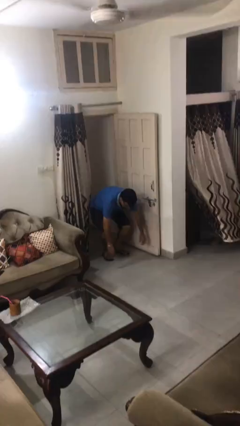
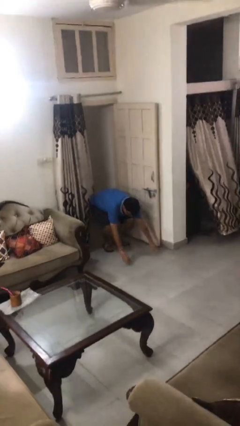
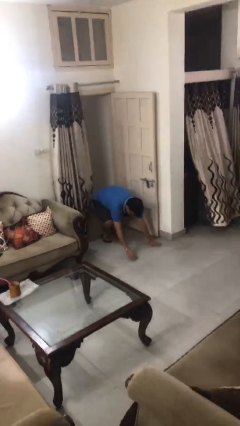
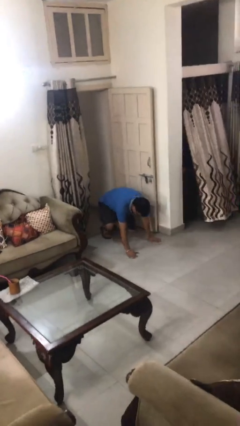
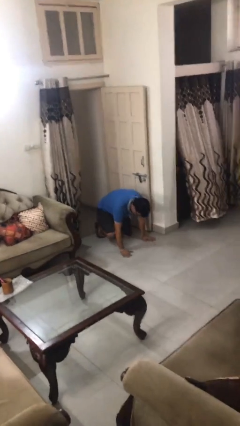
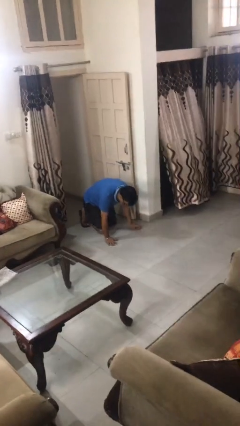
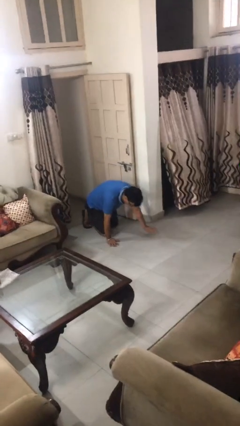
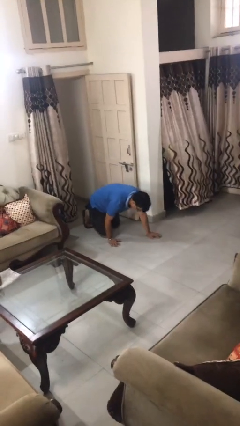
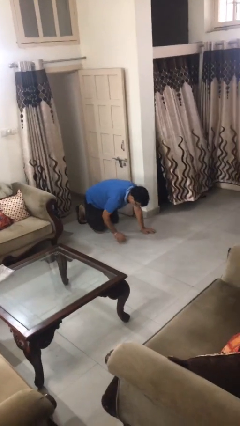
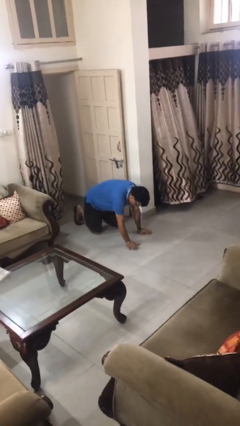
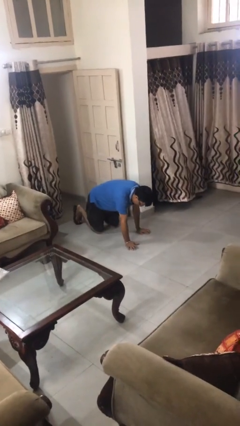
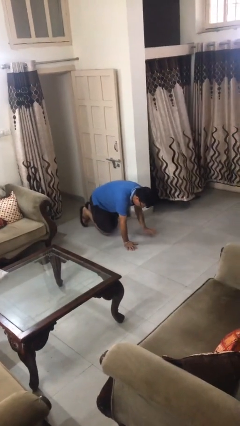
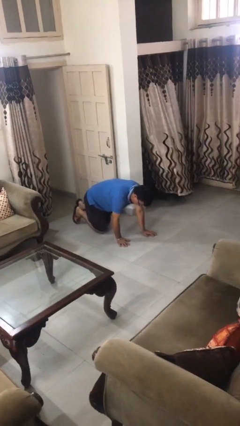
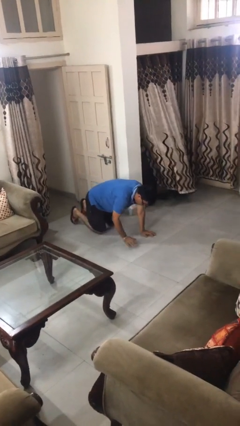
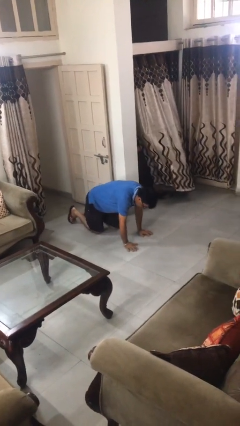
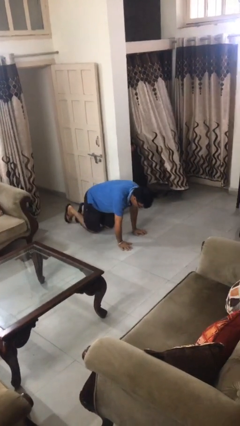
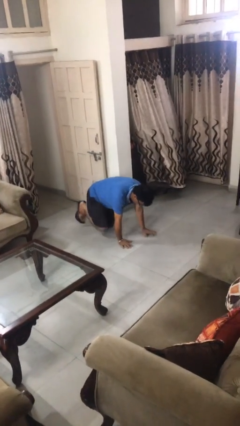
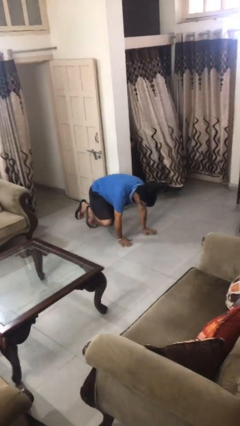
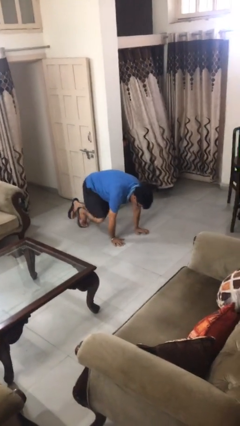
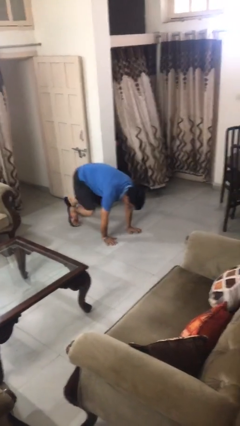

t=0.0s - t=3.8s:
person crawls

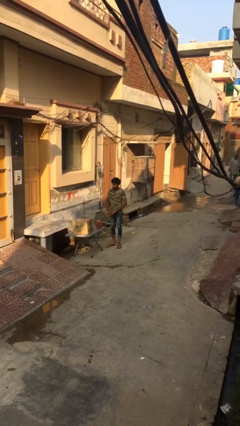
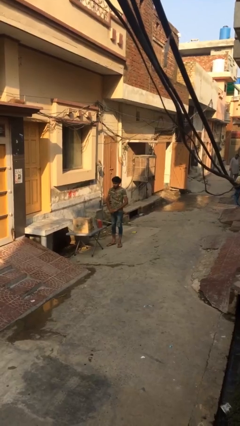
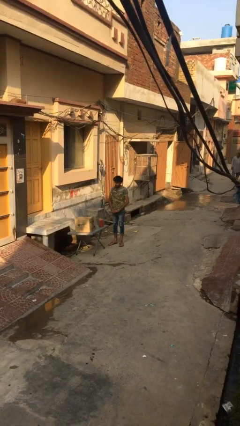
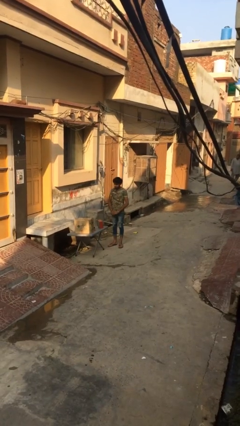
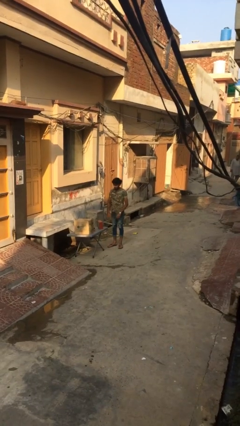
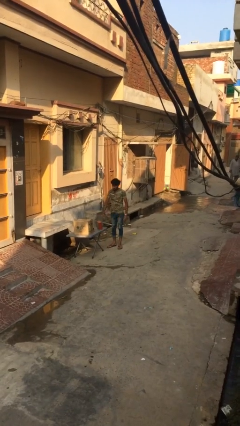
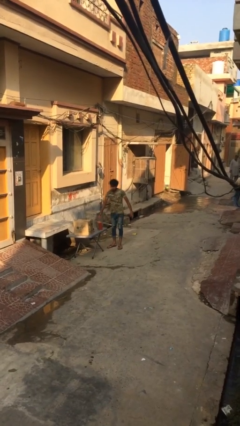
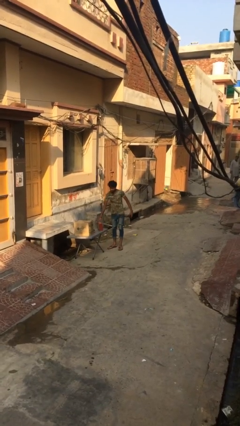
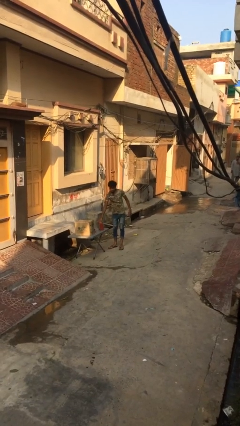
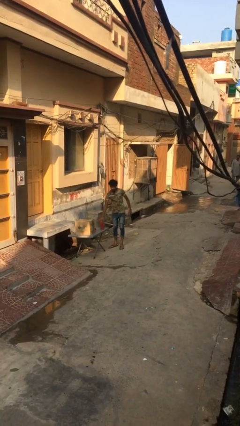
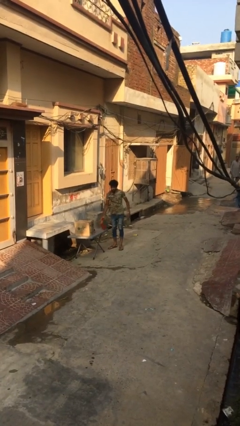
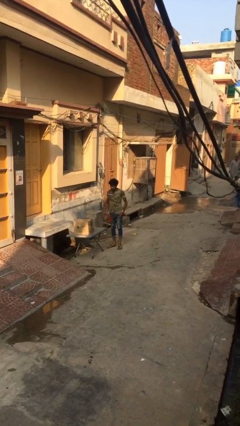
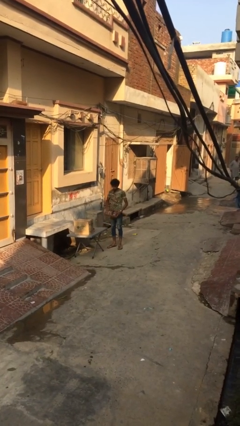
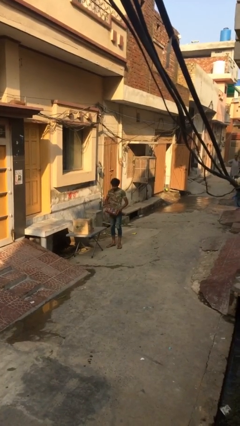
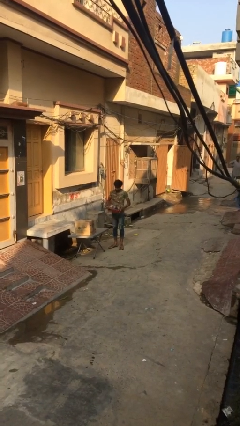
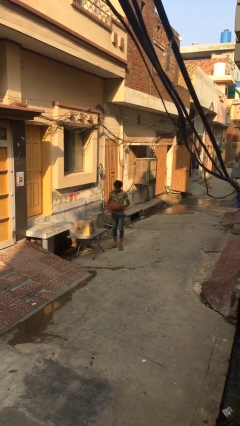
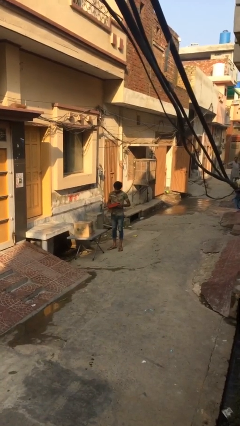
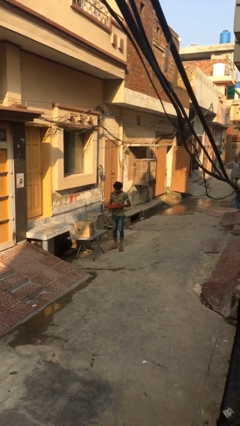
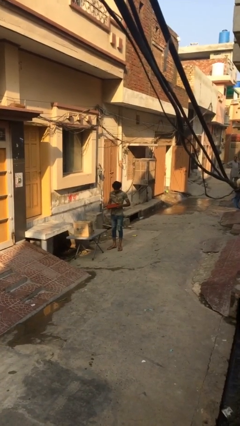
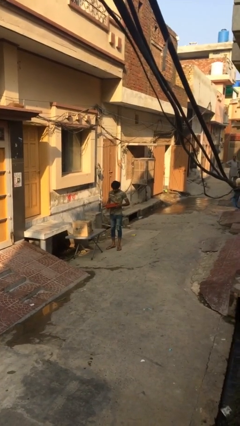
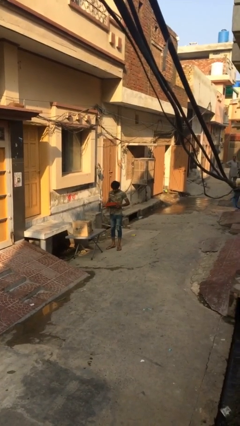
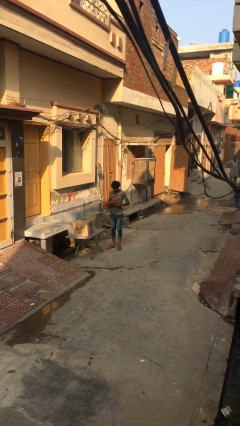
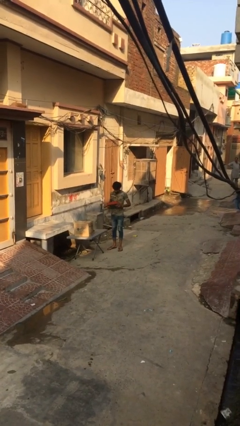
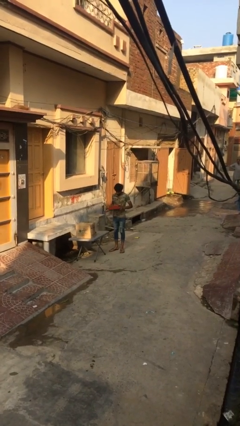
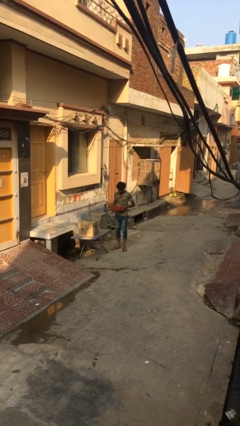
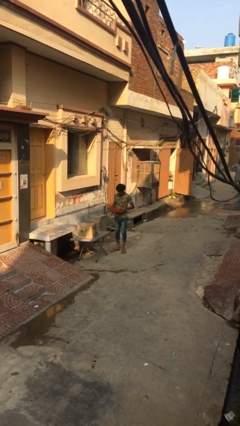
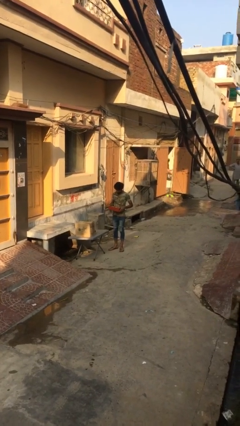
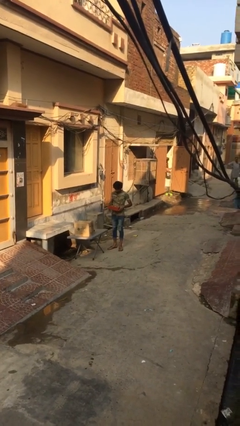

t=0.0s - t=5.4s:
person picks up object from table

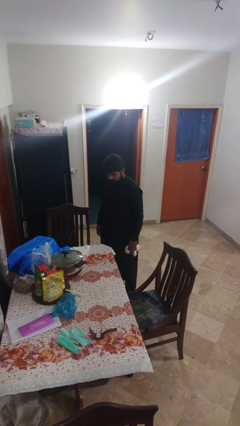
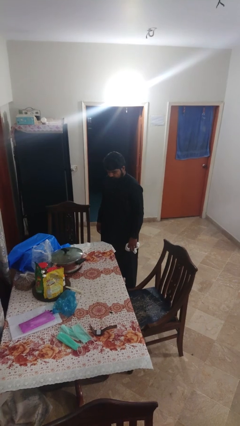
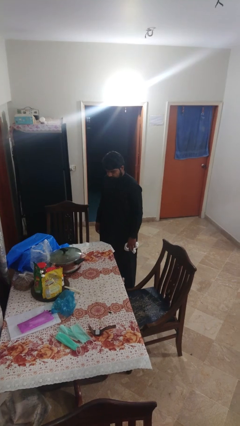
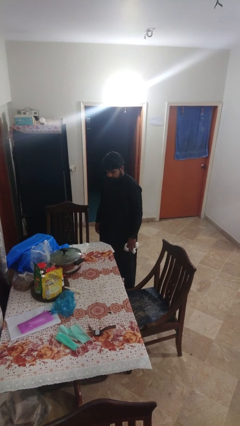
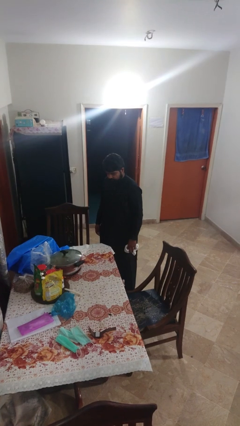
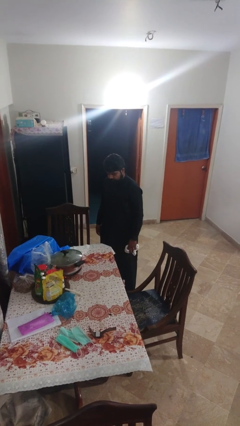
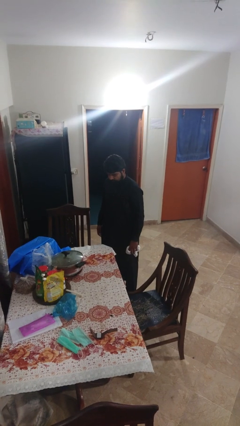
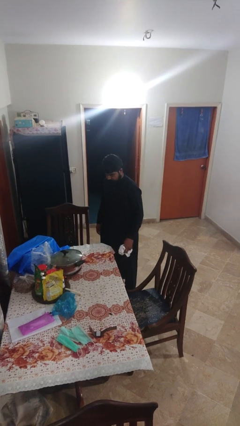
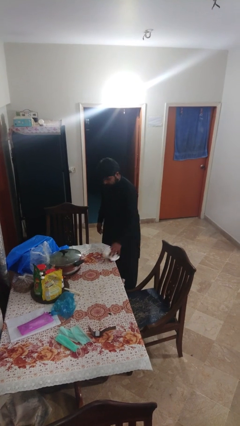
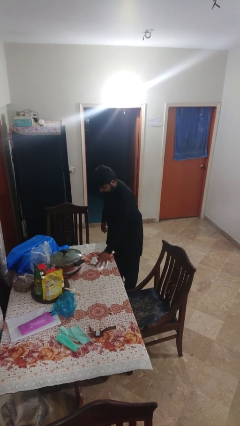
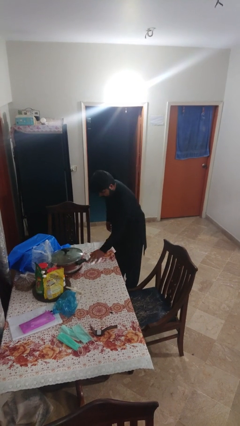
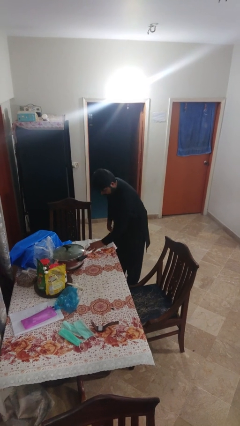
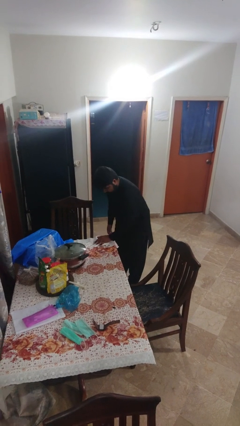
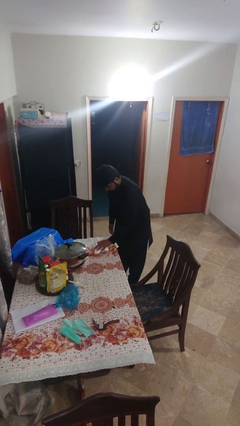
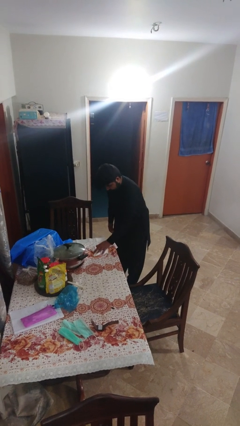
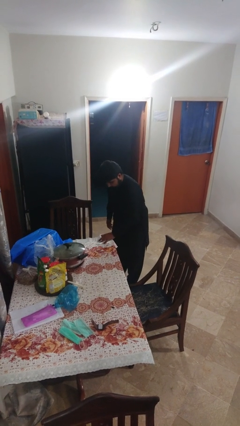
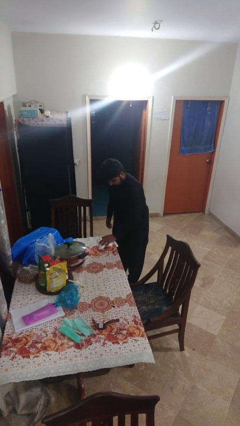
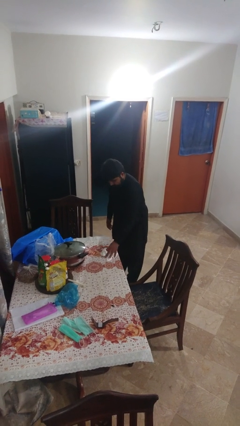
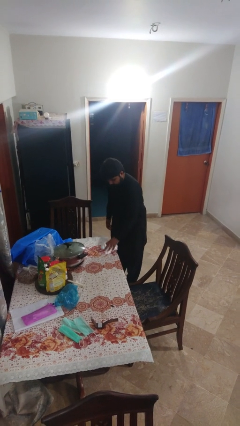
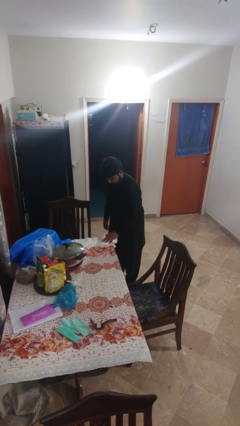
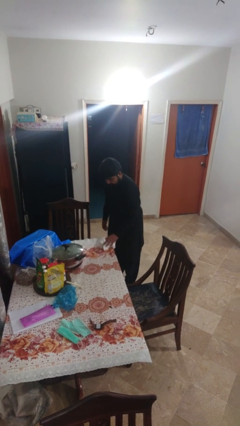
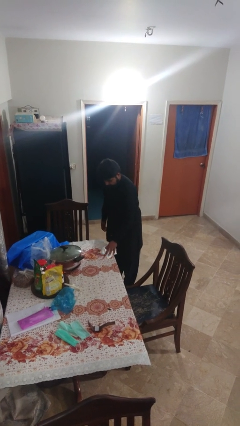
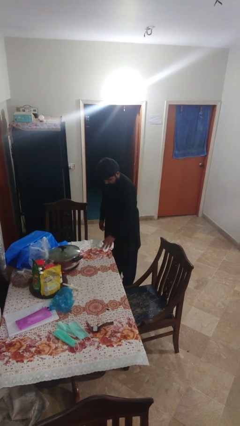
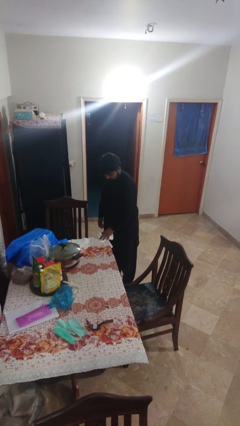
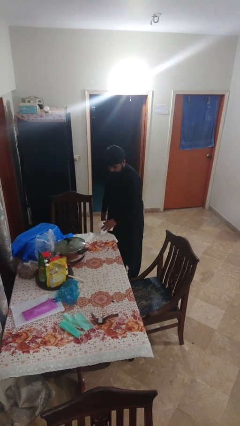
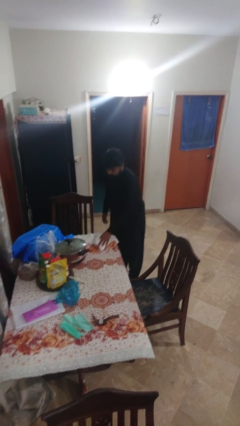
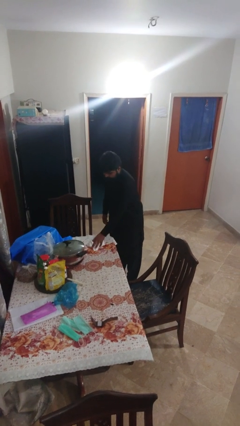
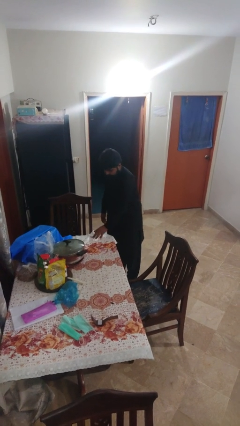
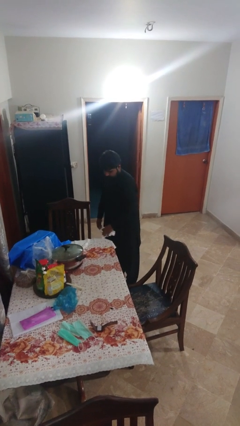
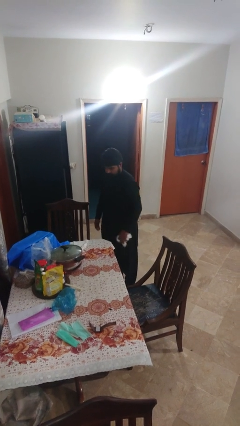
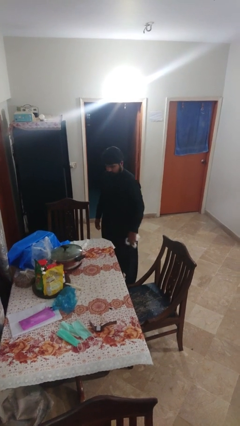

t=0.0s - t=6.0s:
person cleans table with rag

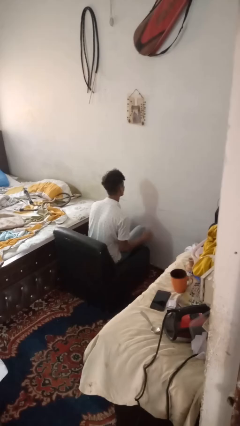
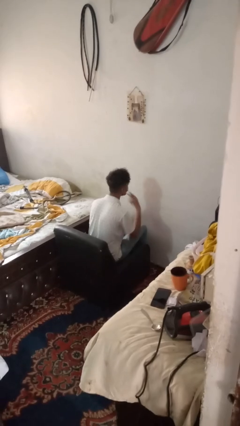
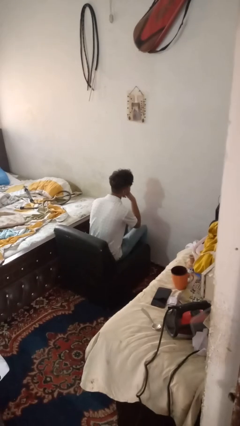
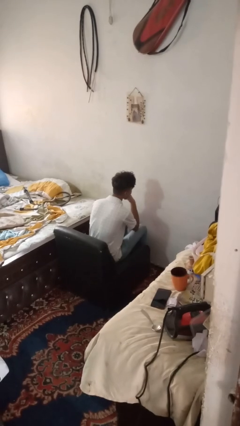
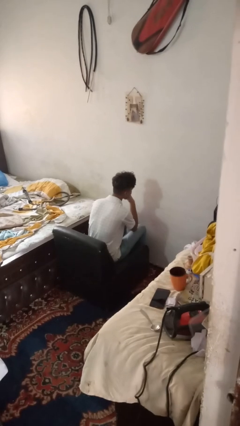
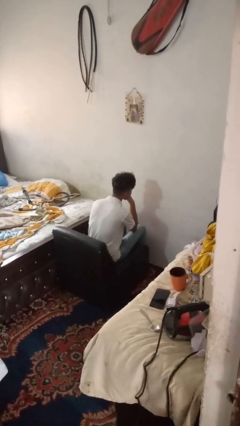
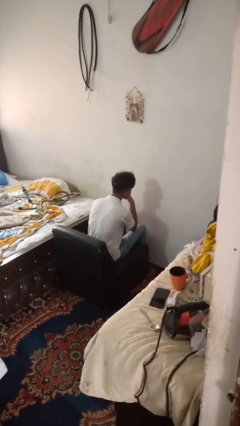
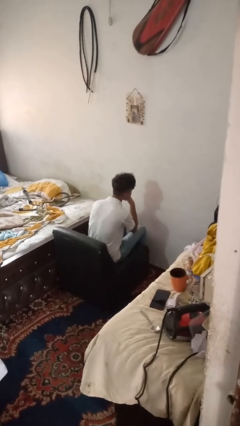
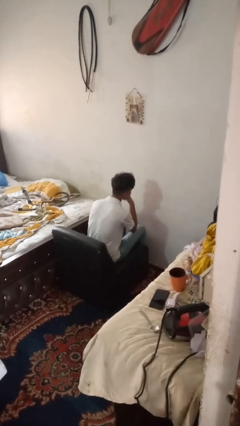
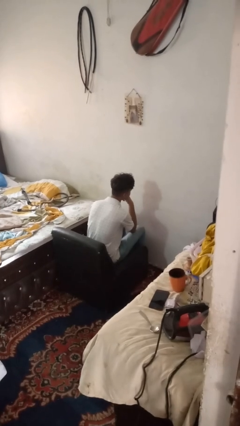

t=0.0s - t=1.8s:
person strokes chin

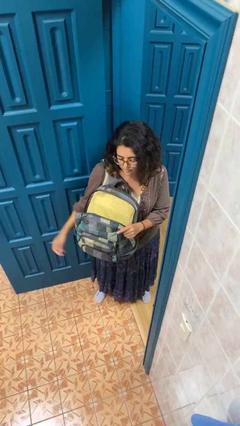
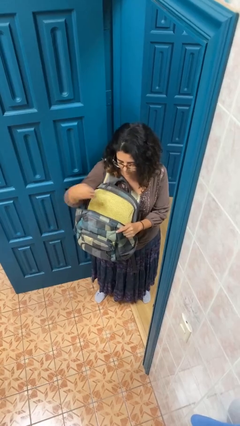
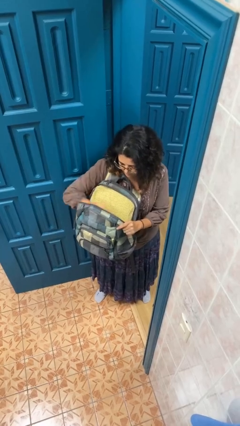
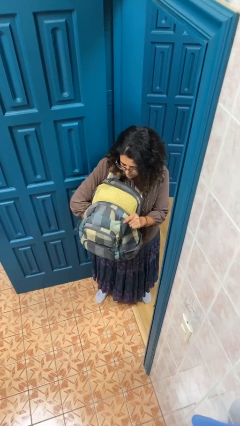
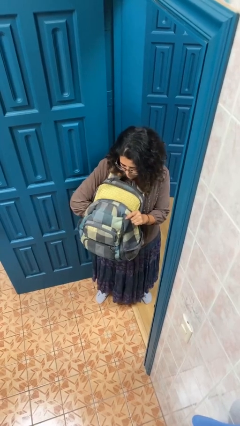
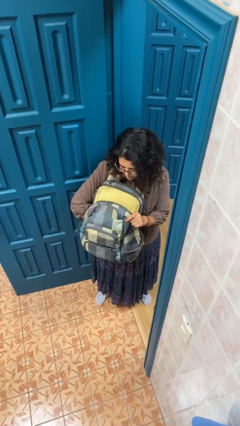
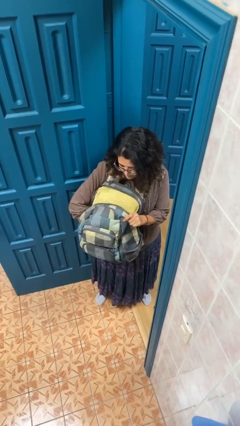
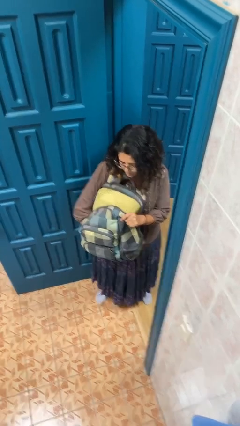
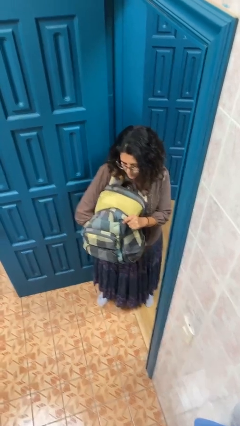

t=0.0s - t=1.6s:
person searches in backpack
